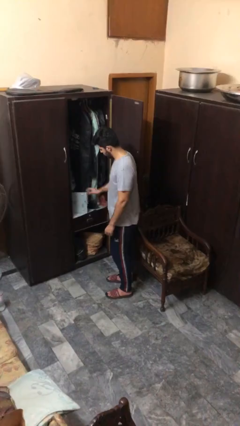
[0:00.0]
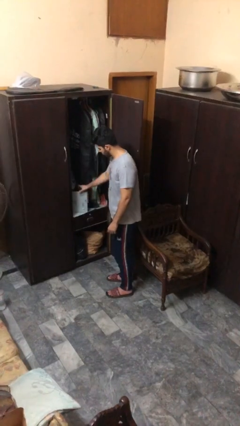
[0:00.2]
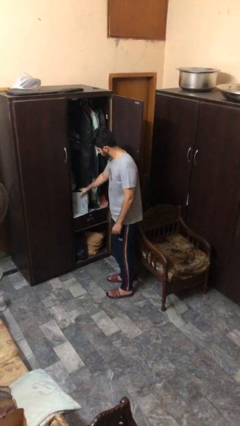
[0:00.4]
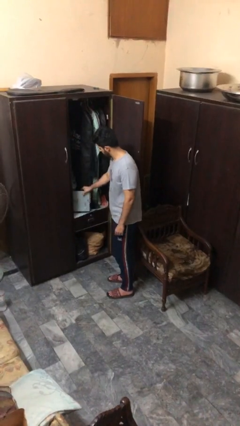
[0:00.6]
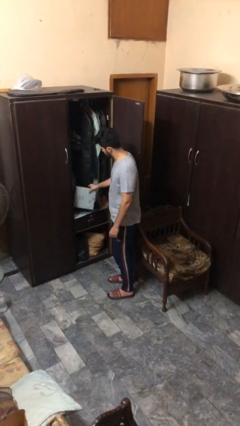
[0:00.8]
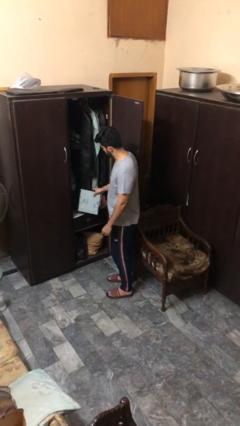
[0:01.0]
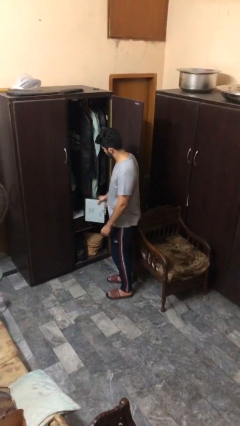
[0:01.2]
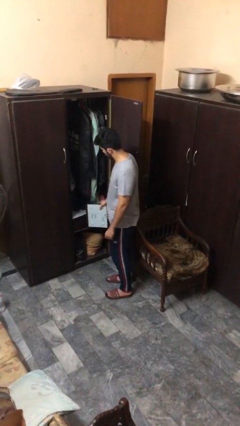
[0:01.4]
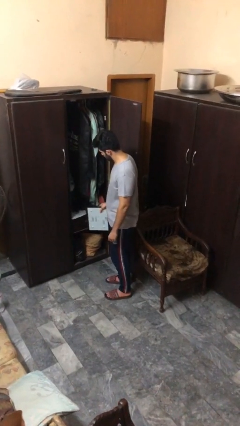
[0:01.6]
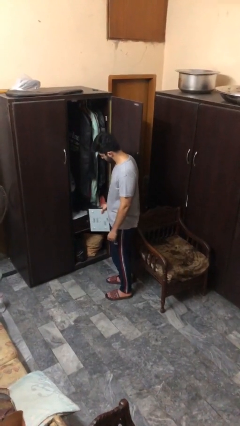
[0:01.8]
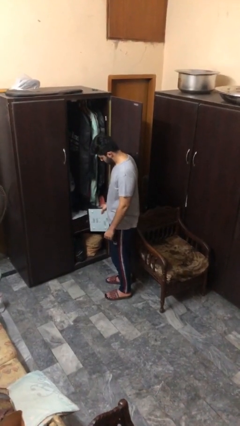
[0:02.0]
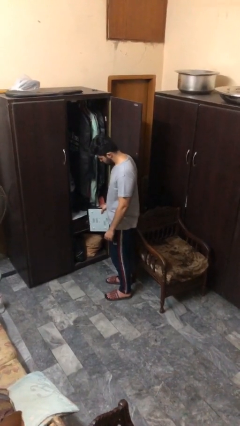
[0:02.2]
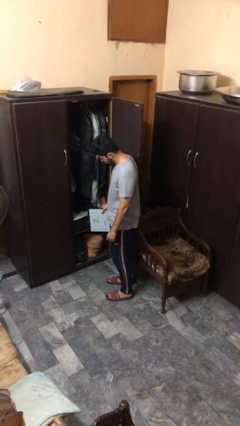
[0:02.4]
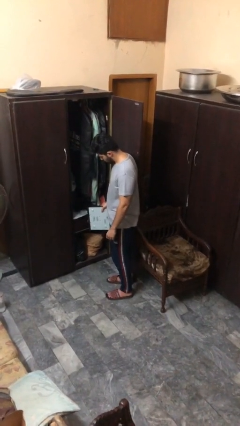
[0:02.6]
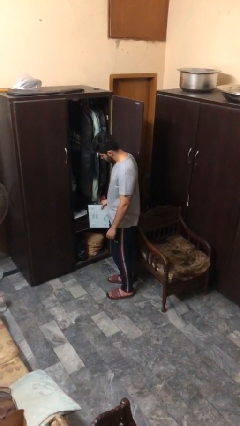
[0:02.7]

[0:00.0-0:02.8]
person picks up object from cabinet

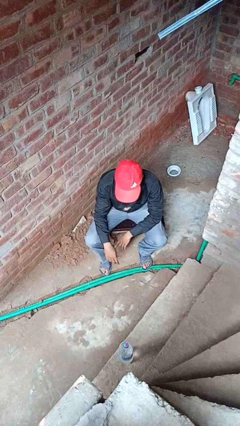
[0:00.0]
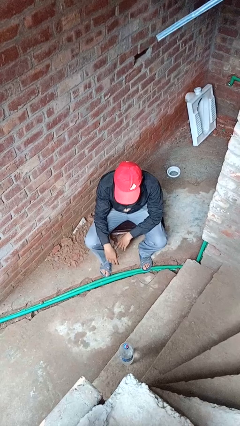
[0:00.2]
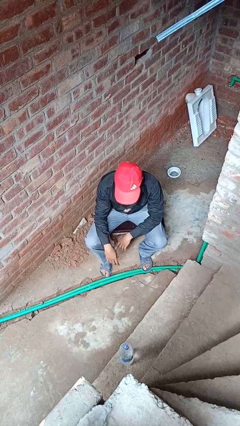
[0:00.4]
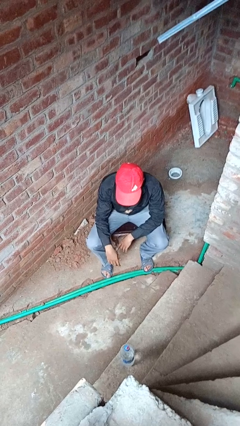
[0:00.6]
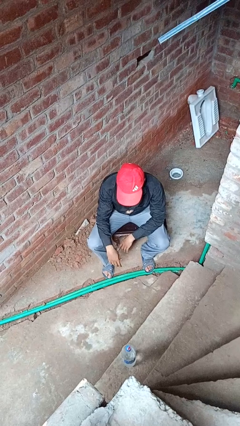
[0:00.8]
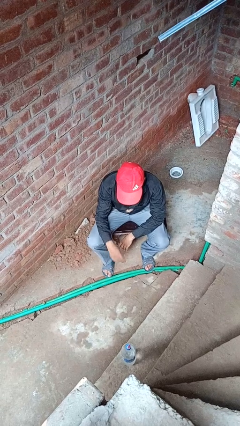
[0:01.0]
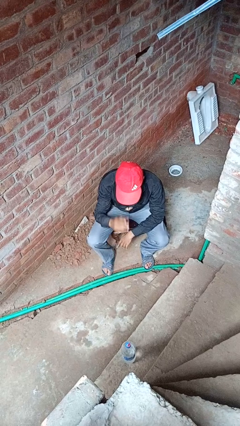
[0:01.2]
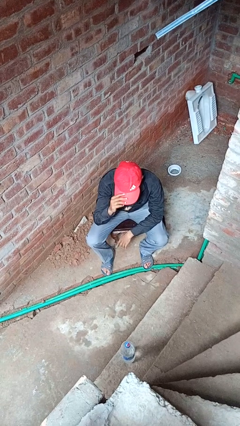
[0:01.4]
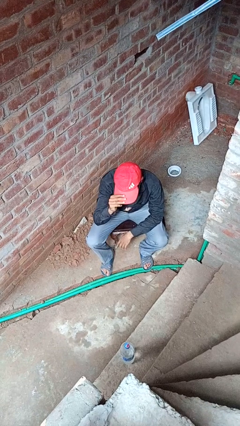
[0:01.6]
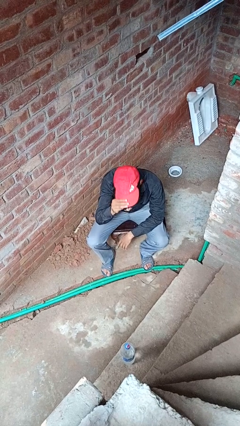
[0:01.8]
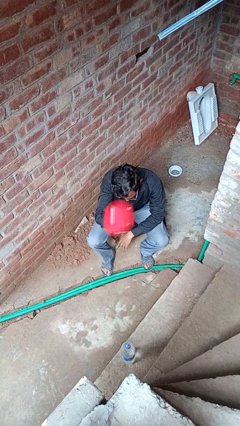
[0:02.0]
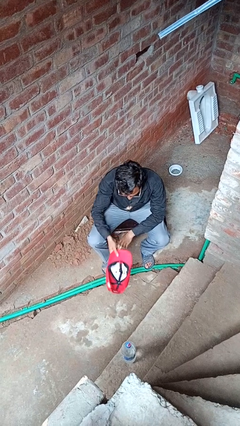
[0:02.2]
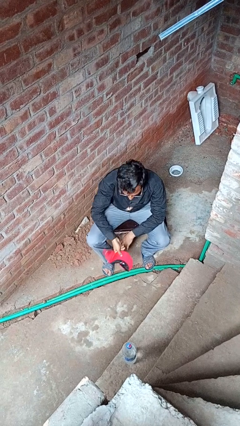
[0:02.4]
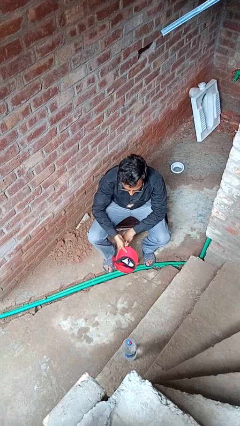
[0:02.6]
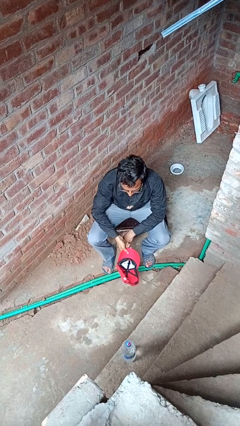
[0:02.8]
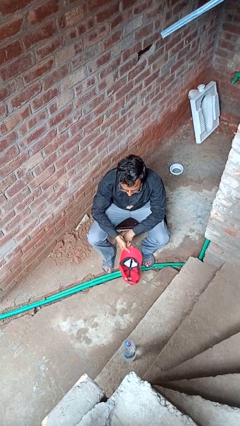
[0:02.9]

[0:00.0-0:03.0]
person takes off hat

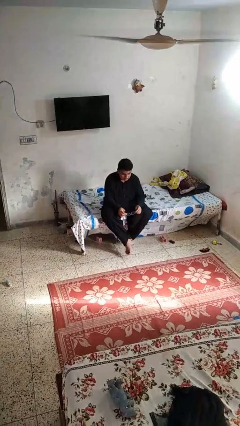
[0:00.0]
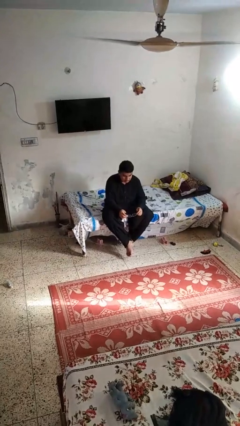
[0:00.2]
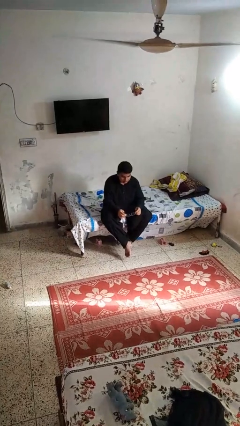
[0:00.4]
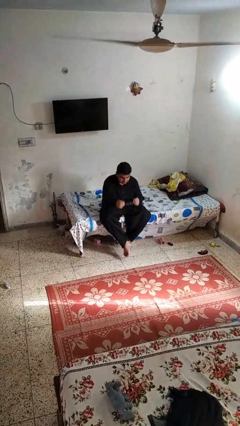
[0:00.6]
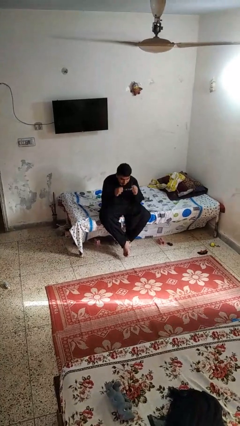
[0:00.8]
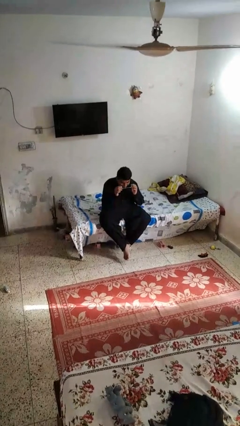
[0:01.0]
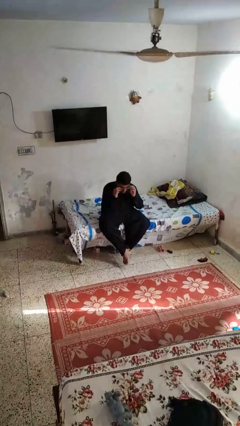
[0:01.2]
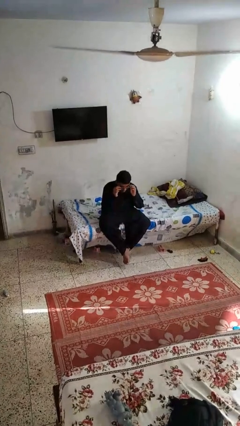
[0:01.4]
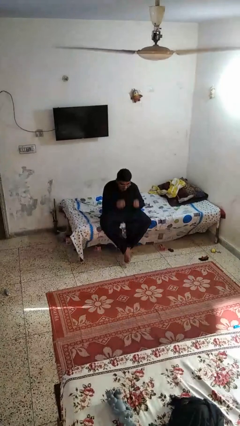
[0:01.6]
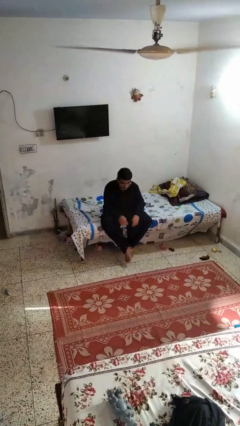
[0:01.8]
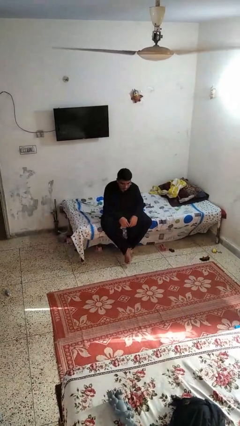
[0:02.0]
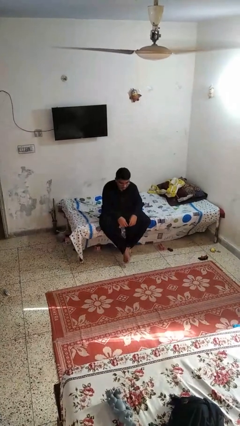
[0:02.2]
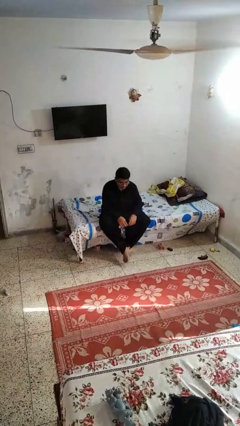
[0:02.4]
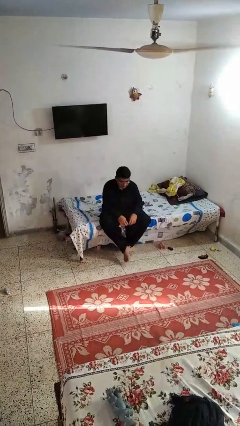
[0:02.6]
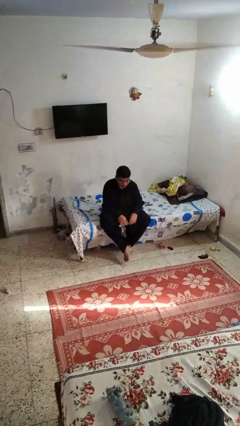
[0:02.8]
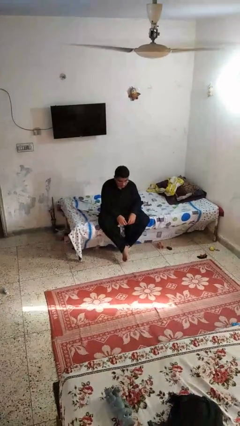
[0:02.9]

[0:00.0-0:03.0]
person puts on glasses

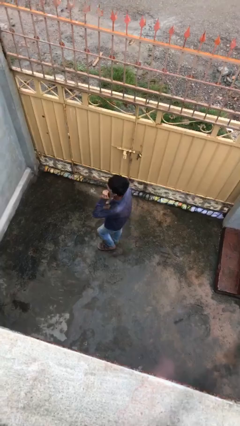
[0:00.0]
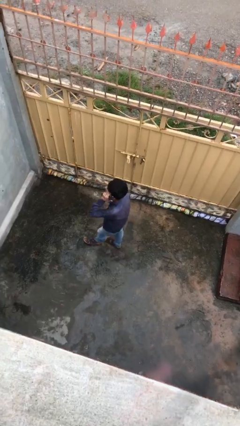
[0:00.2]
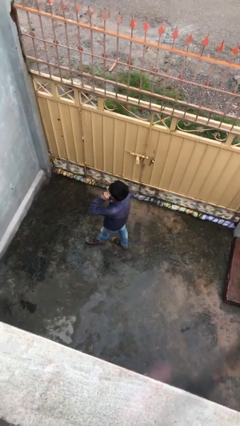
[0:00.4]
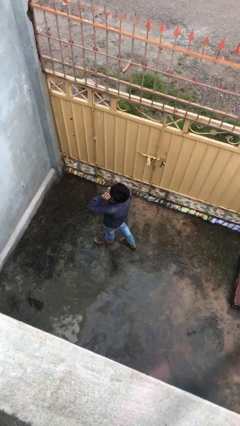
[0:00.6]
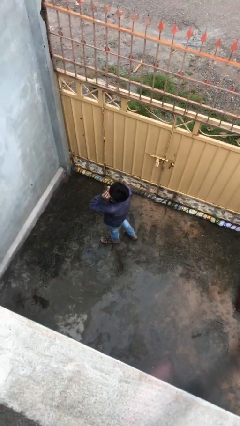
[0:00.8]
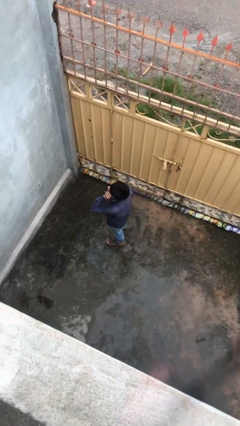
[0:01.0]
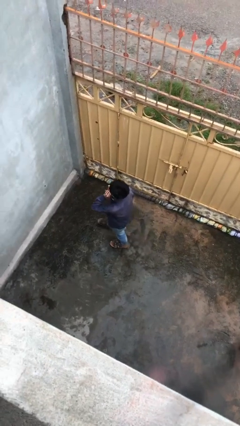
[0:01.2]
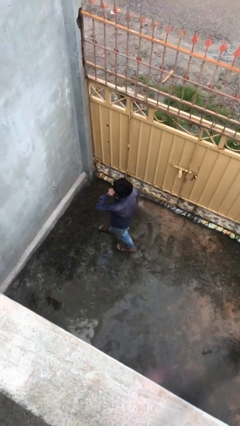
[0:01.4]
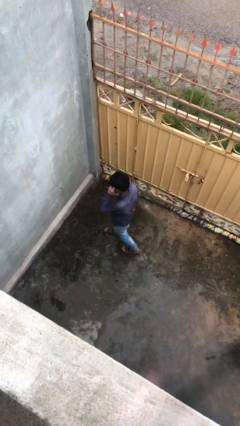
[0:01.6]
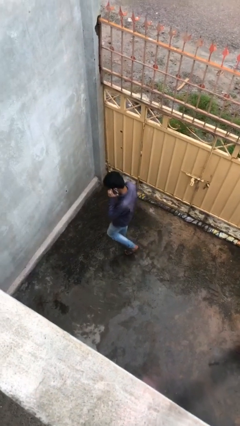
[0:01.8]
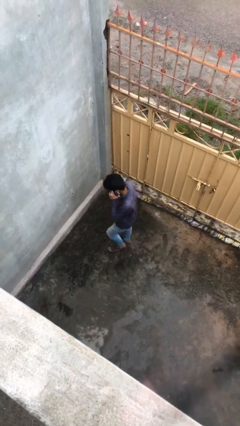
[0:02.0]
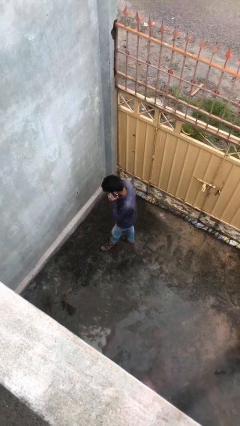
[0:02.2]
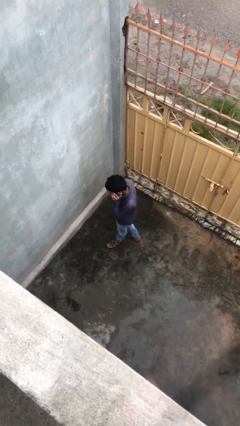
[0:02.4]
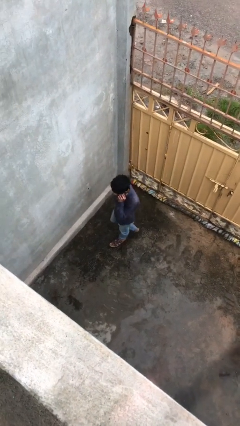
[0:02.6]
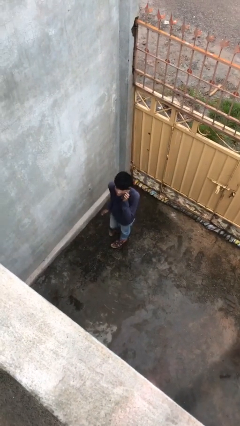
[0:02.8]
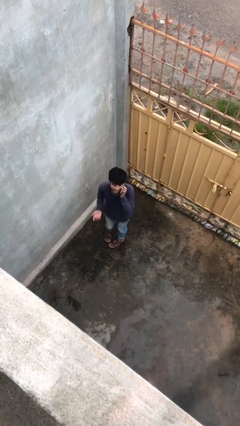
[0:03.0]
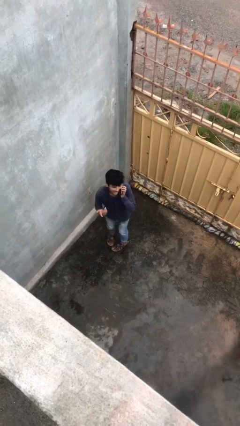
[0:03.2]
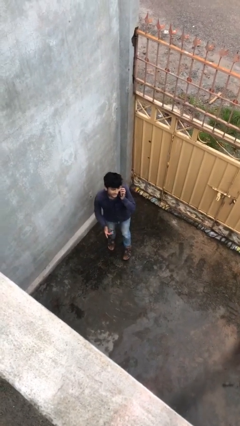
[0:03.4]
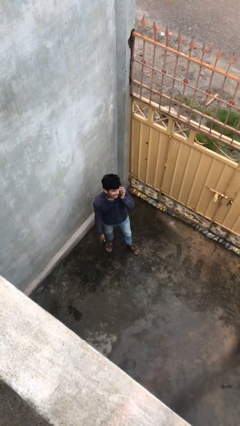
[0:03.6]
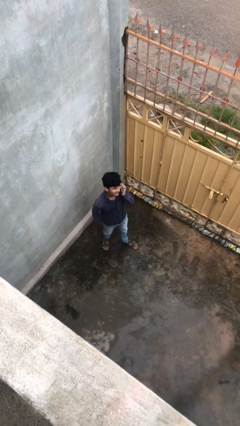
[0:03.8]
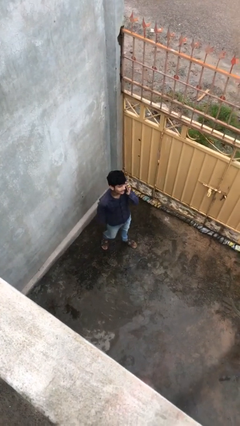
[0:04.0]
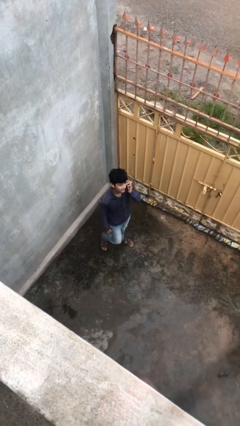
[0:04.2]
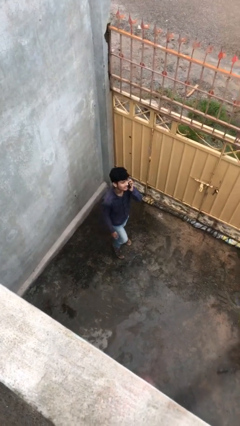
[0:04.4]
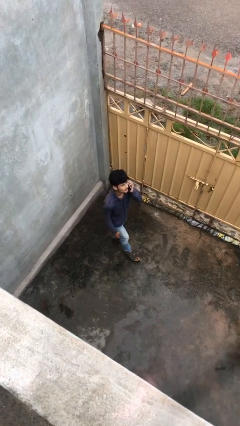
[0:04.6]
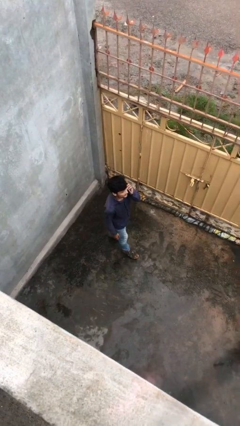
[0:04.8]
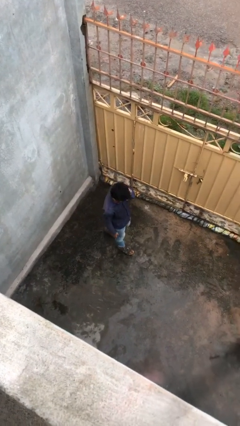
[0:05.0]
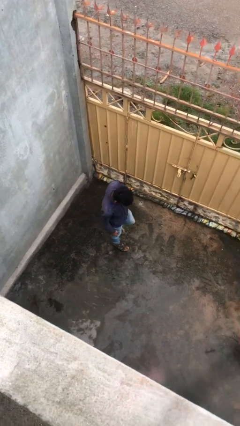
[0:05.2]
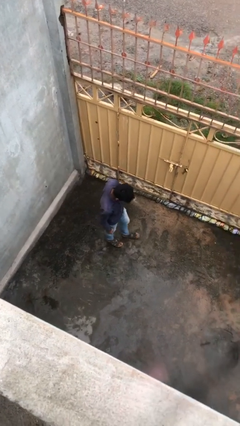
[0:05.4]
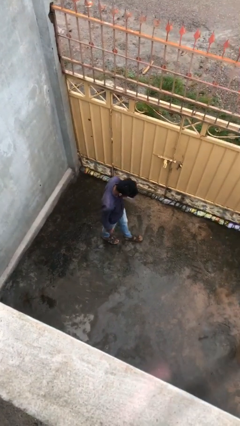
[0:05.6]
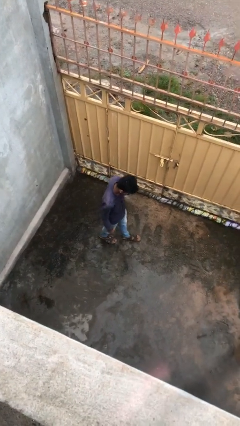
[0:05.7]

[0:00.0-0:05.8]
person talks on phone

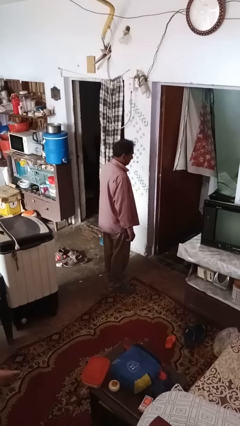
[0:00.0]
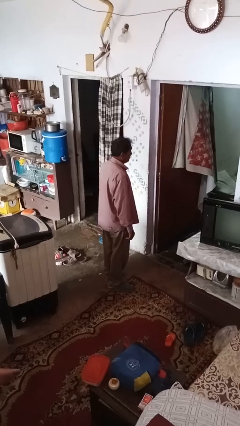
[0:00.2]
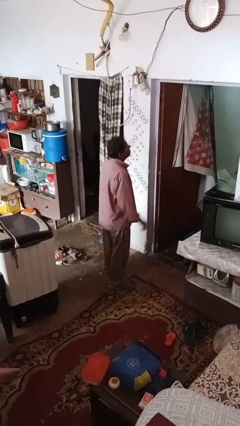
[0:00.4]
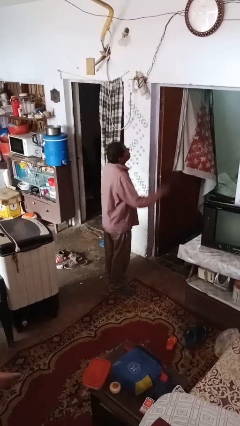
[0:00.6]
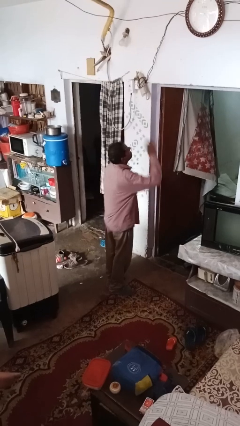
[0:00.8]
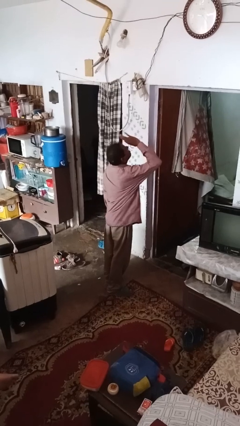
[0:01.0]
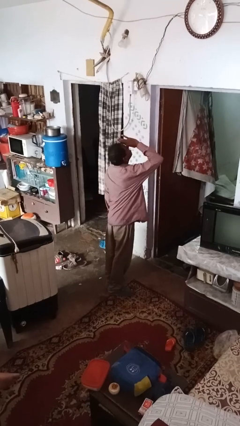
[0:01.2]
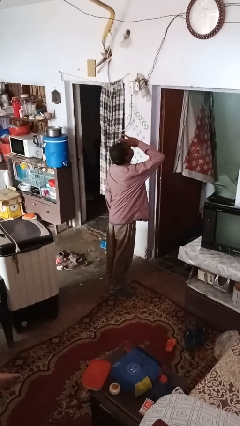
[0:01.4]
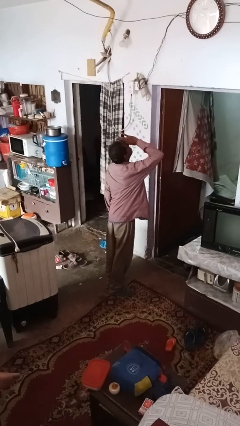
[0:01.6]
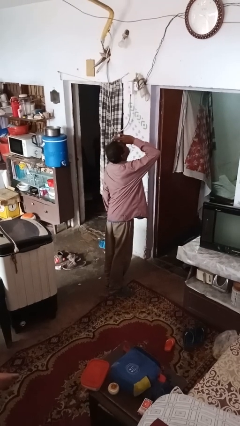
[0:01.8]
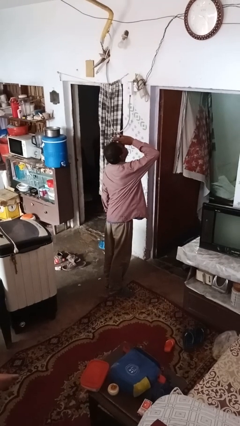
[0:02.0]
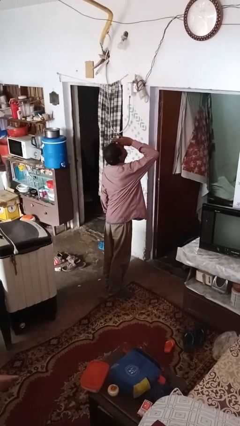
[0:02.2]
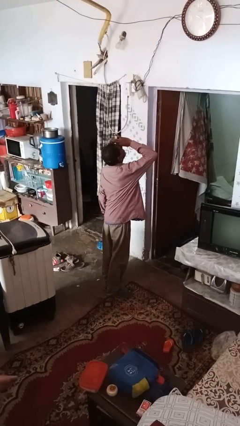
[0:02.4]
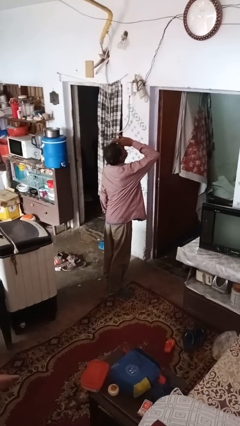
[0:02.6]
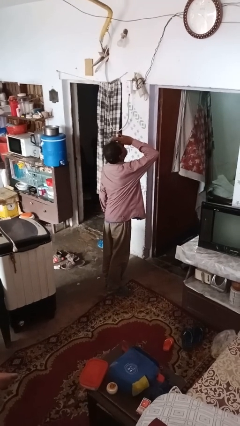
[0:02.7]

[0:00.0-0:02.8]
person gestures watch closely
